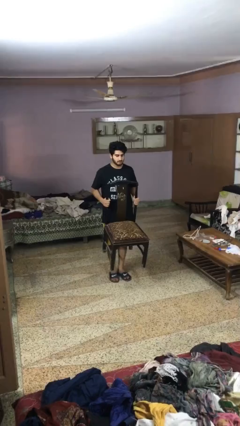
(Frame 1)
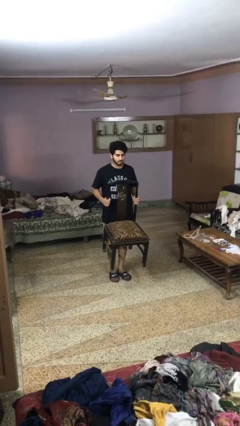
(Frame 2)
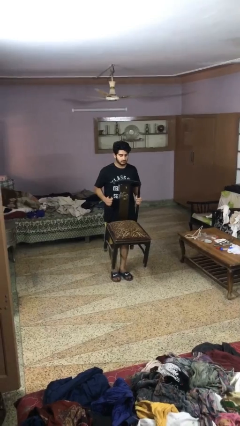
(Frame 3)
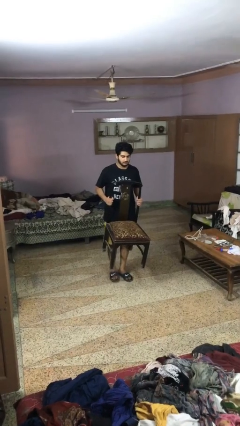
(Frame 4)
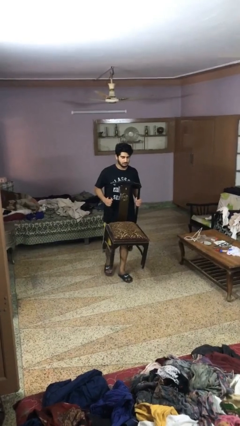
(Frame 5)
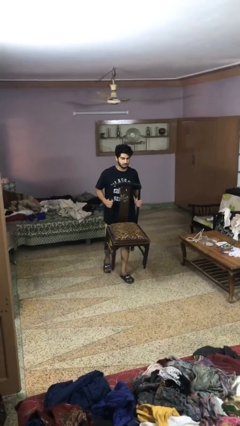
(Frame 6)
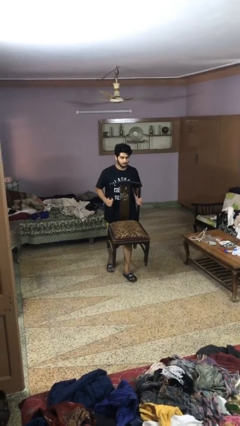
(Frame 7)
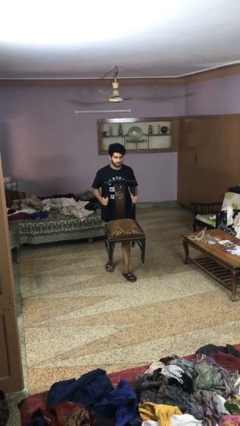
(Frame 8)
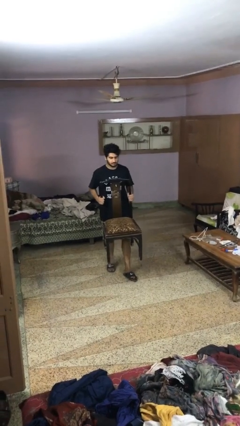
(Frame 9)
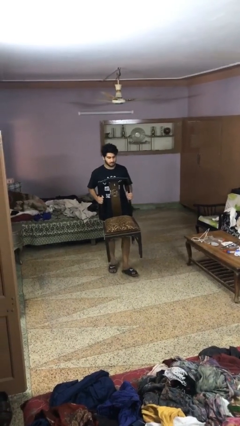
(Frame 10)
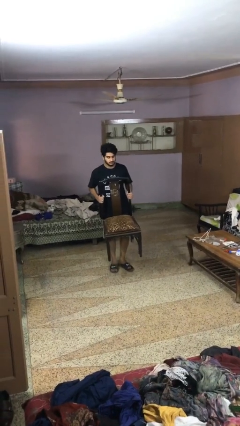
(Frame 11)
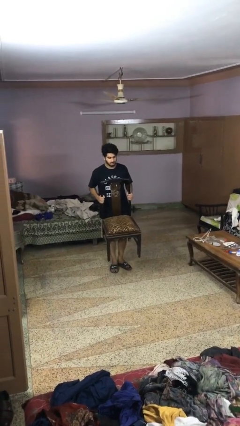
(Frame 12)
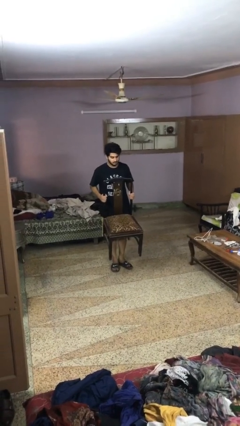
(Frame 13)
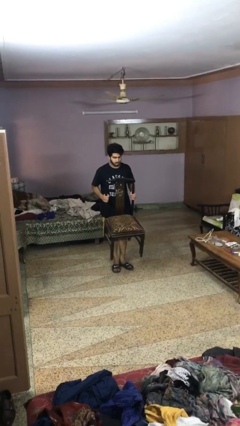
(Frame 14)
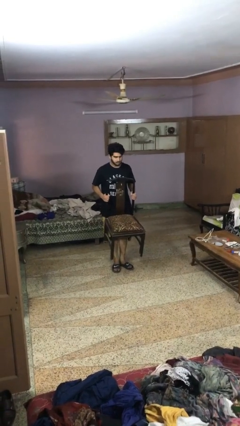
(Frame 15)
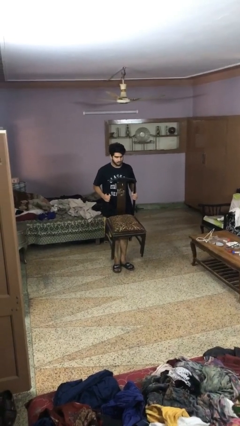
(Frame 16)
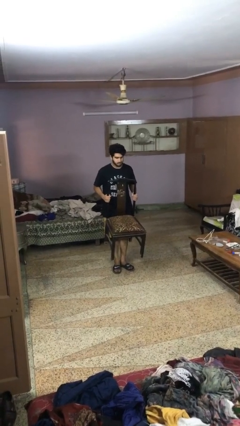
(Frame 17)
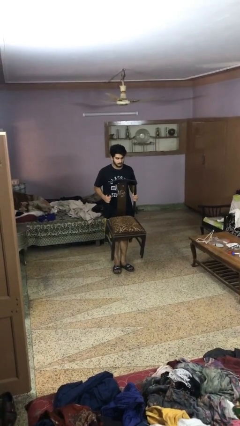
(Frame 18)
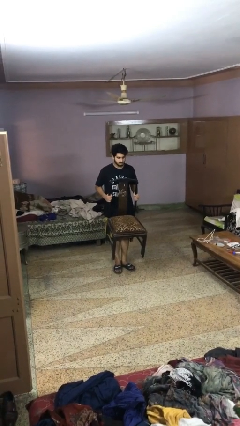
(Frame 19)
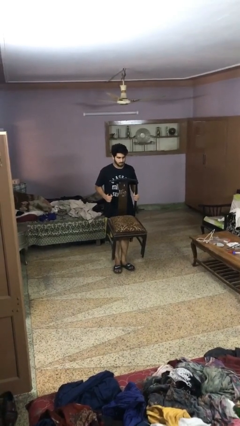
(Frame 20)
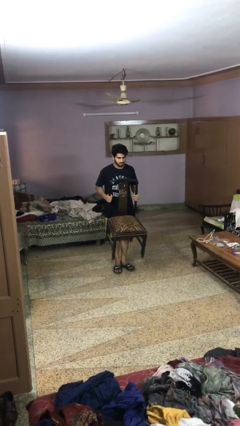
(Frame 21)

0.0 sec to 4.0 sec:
person carries furniture

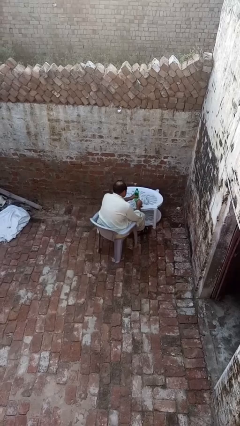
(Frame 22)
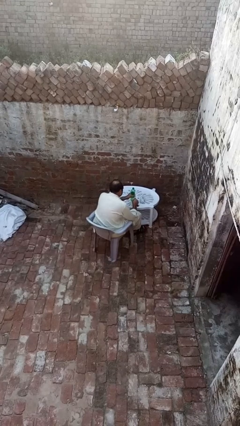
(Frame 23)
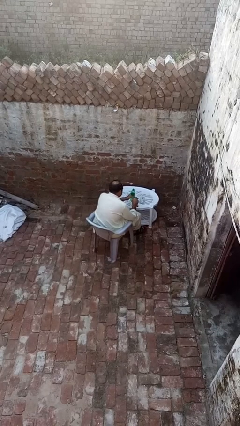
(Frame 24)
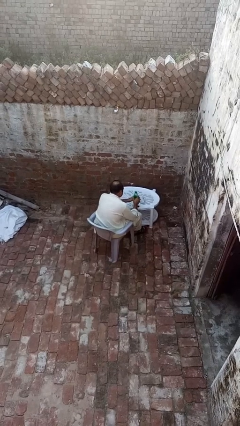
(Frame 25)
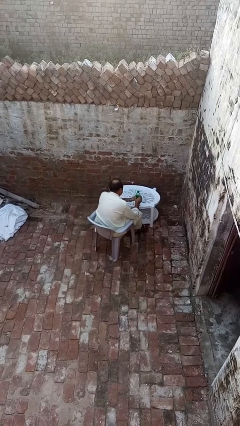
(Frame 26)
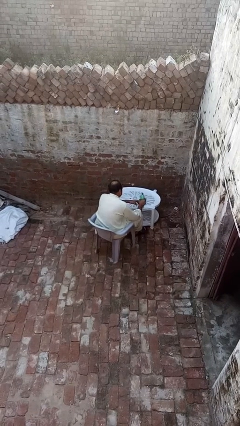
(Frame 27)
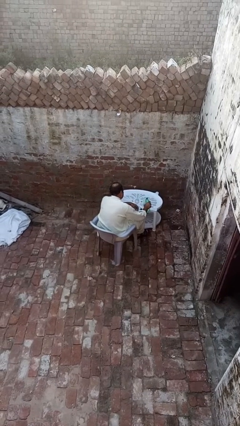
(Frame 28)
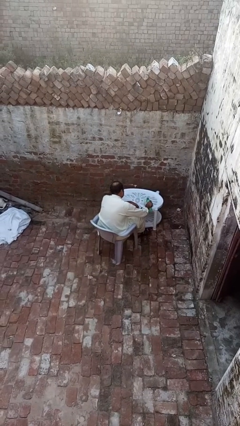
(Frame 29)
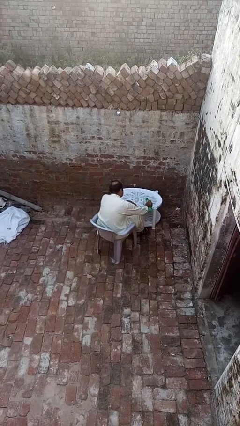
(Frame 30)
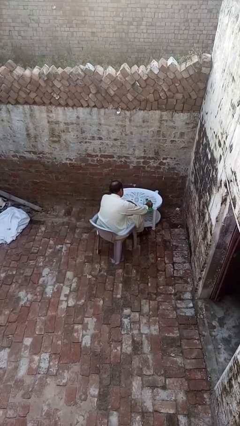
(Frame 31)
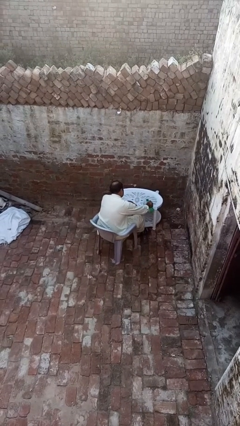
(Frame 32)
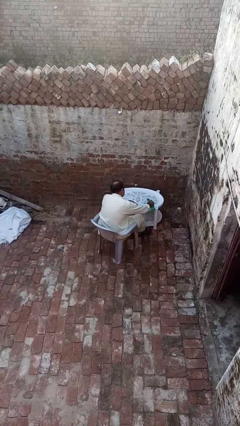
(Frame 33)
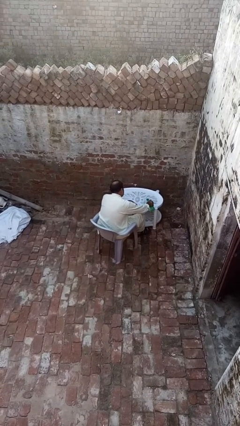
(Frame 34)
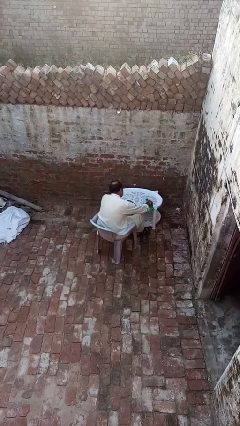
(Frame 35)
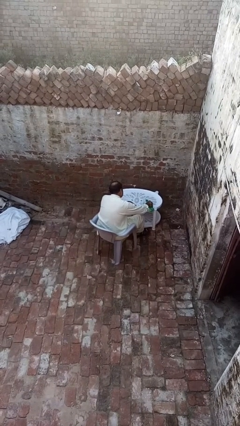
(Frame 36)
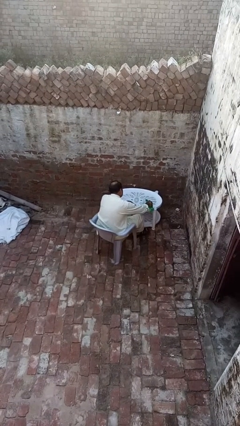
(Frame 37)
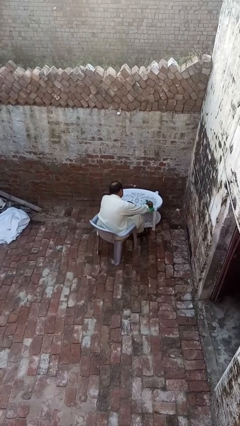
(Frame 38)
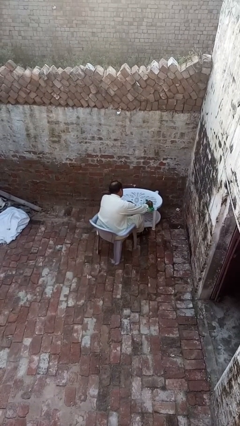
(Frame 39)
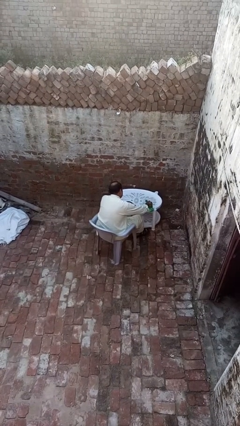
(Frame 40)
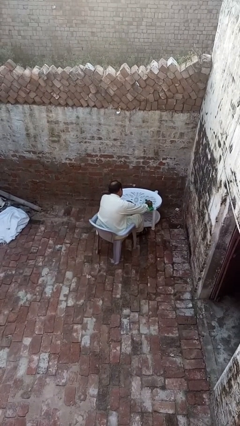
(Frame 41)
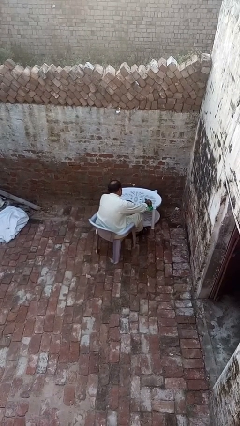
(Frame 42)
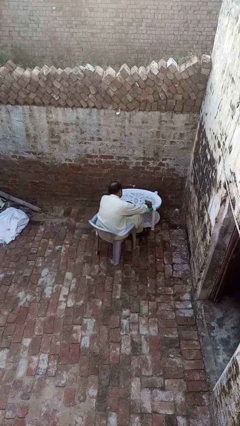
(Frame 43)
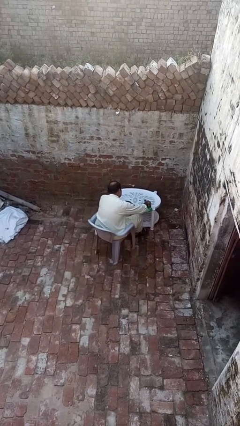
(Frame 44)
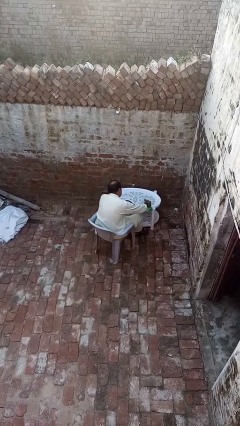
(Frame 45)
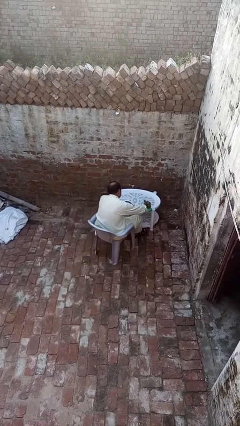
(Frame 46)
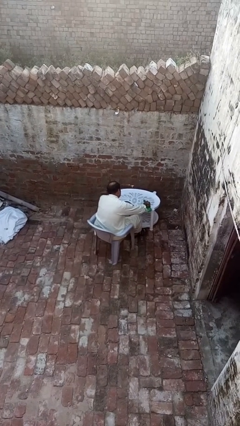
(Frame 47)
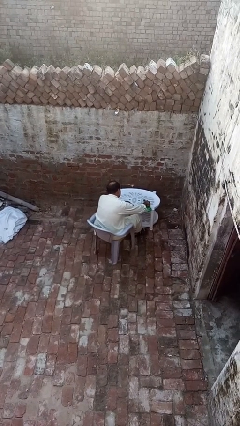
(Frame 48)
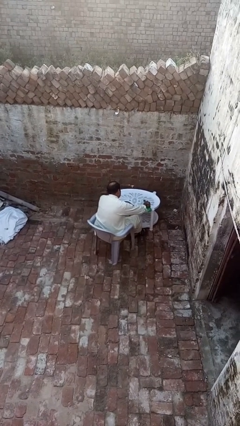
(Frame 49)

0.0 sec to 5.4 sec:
person pours liquid into cup

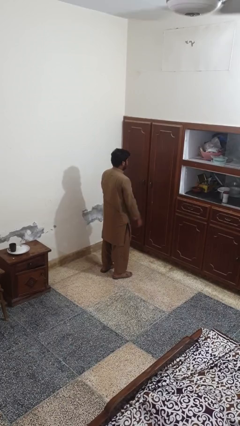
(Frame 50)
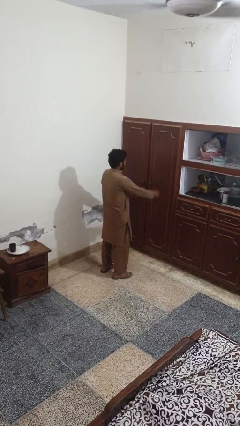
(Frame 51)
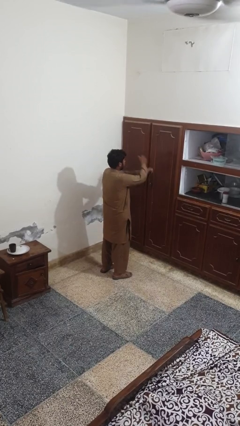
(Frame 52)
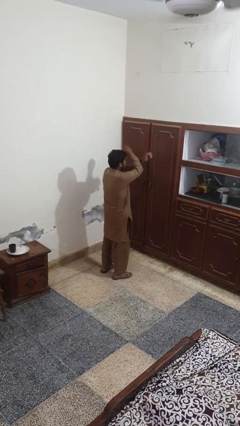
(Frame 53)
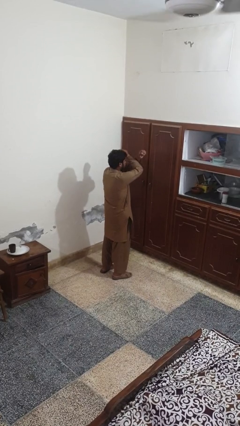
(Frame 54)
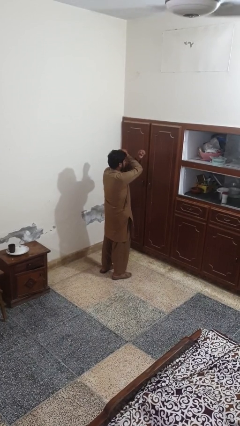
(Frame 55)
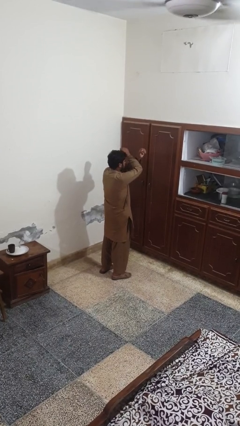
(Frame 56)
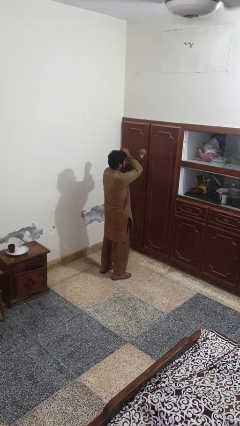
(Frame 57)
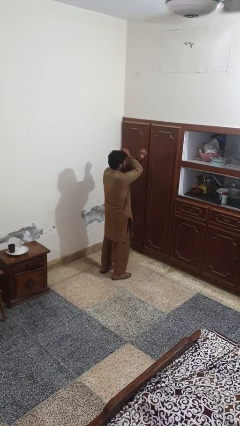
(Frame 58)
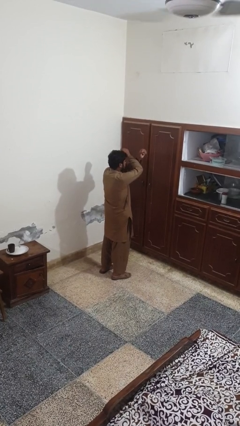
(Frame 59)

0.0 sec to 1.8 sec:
person gestures arms x

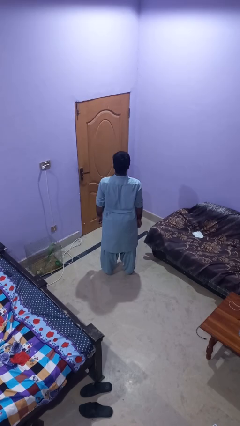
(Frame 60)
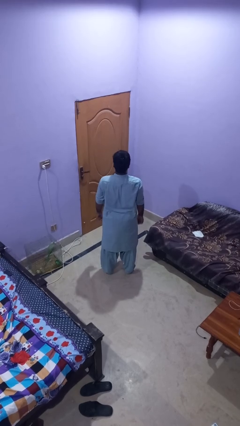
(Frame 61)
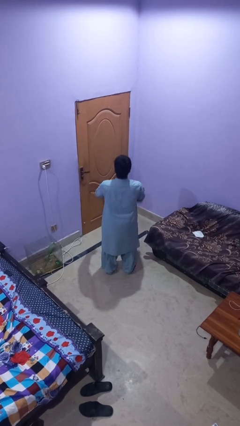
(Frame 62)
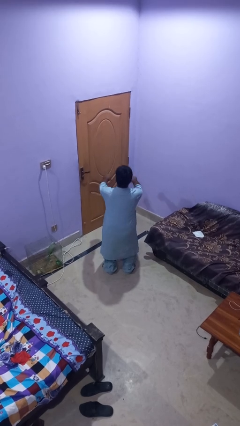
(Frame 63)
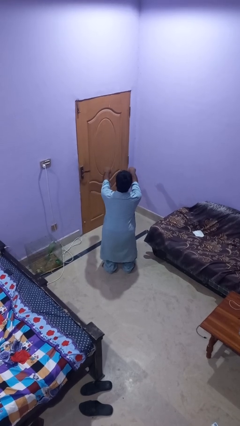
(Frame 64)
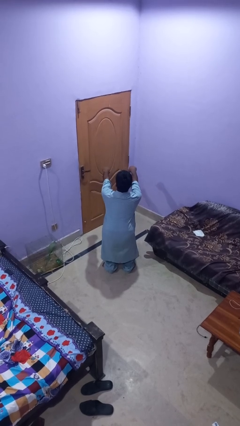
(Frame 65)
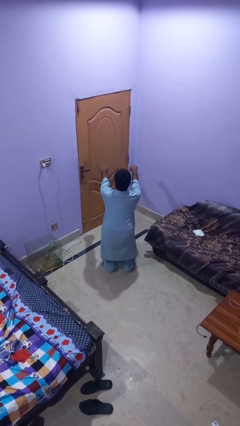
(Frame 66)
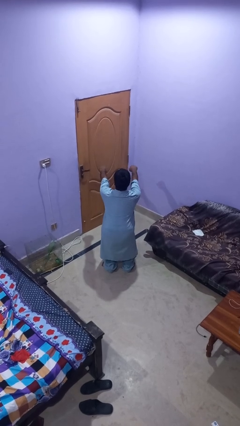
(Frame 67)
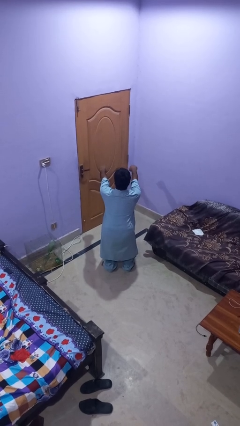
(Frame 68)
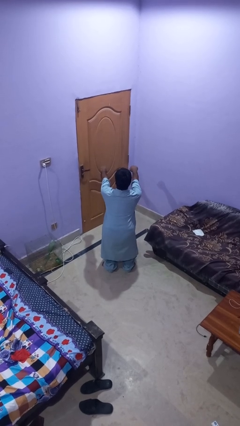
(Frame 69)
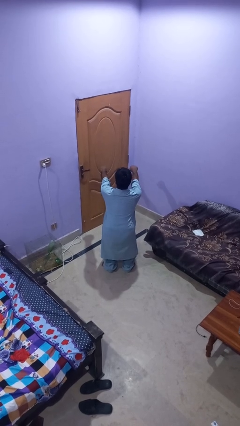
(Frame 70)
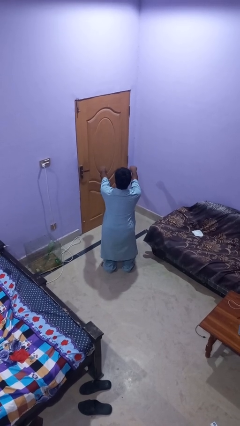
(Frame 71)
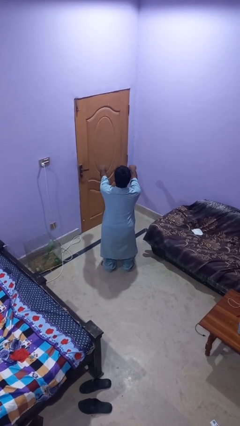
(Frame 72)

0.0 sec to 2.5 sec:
person squats

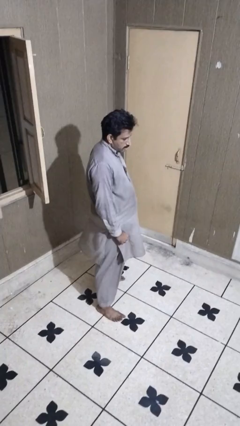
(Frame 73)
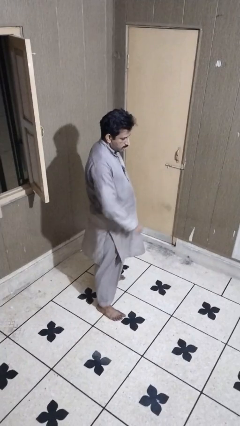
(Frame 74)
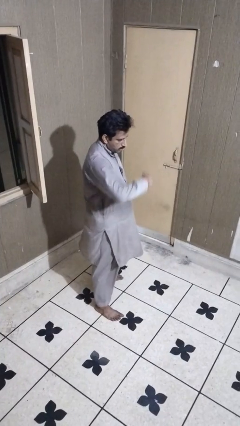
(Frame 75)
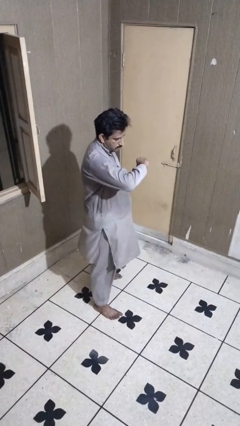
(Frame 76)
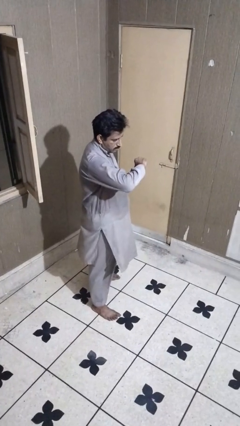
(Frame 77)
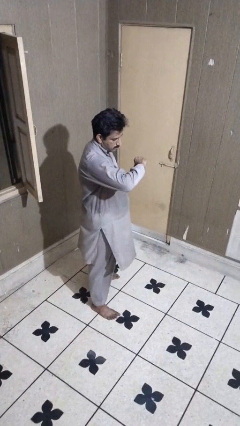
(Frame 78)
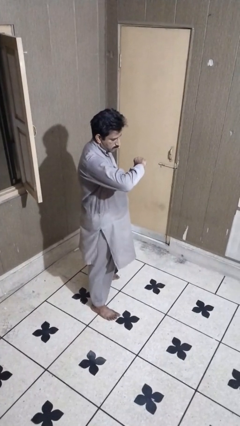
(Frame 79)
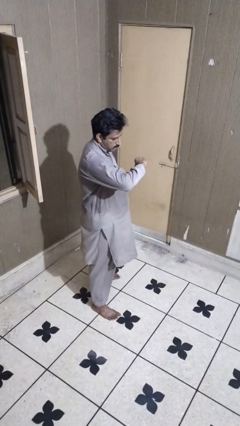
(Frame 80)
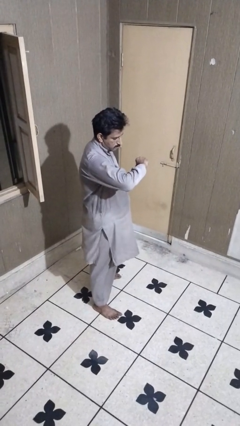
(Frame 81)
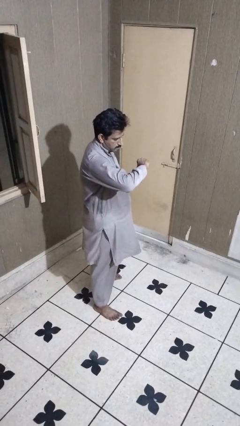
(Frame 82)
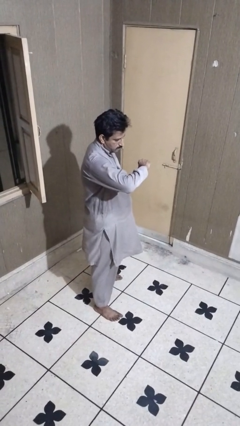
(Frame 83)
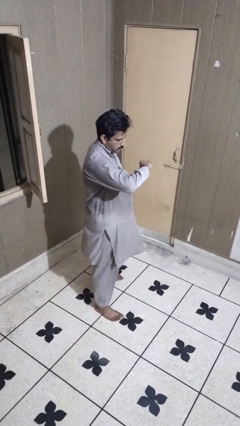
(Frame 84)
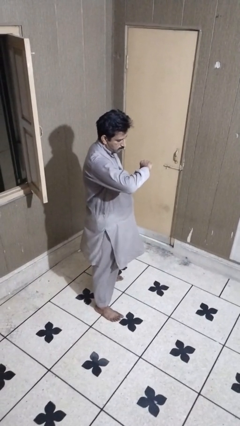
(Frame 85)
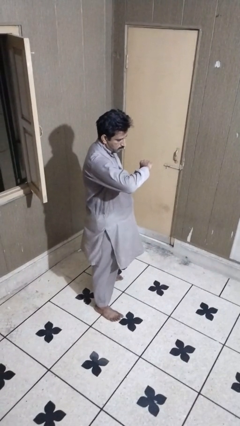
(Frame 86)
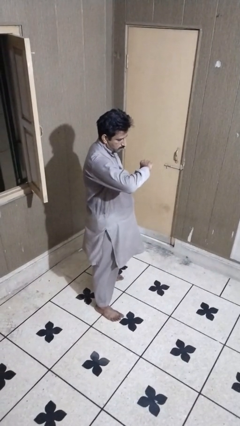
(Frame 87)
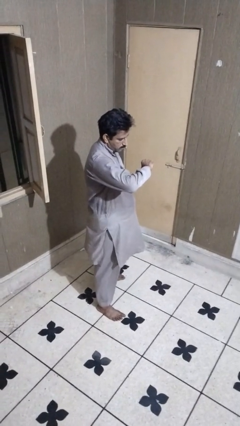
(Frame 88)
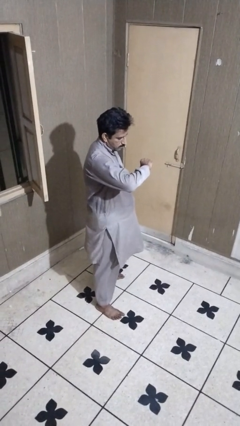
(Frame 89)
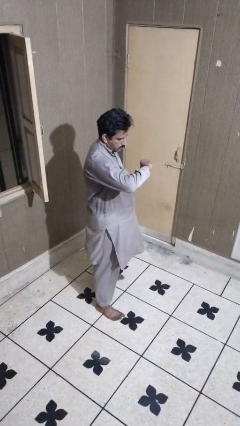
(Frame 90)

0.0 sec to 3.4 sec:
person karate chop

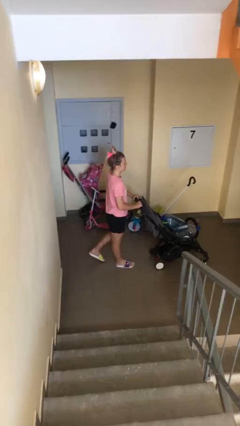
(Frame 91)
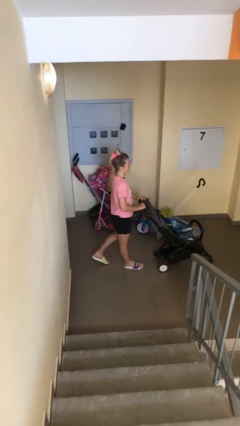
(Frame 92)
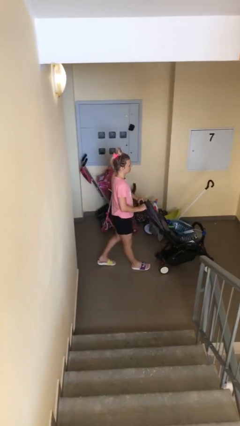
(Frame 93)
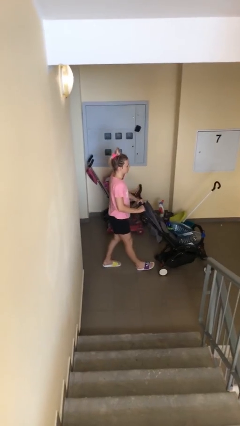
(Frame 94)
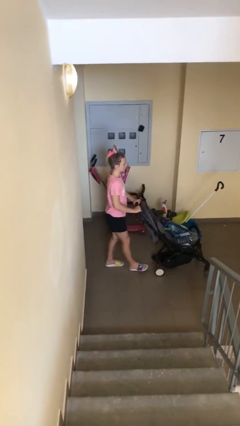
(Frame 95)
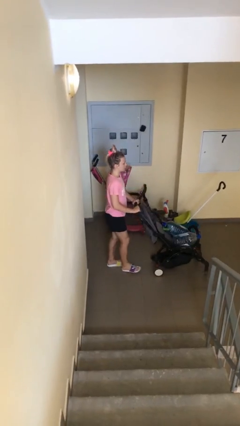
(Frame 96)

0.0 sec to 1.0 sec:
person pulls wheeled cart
